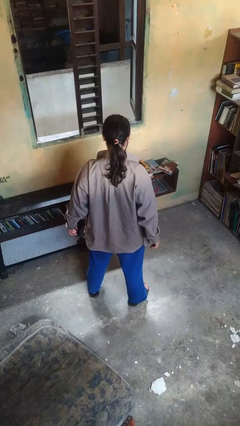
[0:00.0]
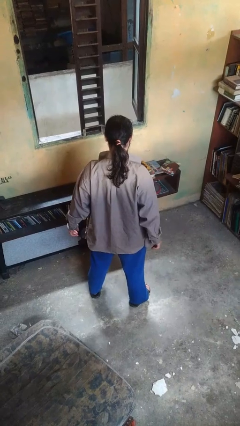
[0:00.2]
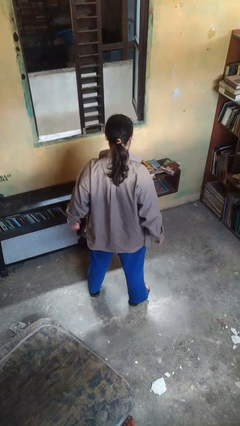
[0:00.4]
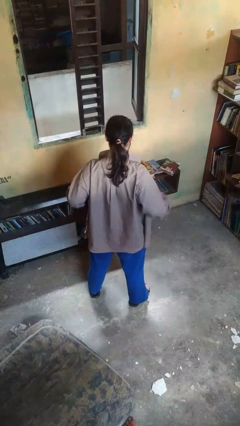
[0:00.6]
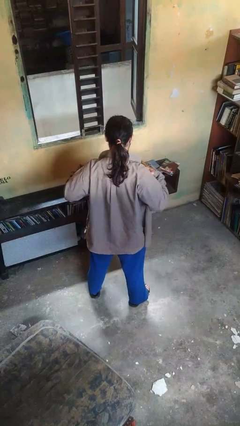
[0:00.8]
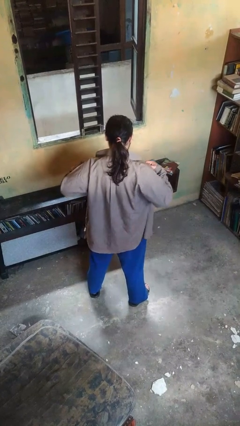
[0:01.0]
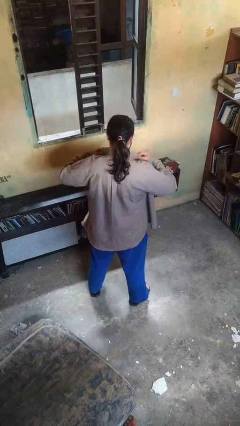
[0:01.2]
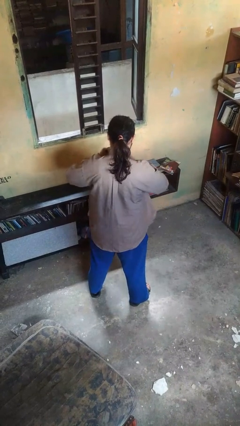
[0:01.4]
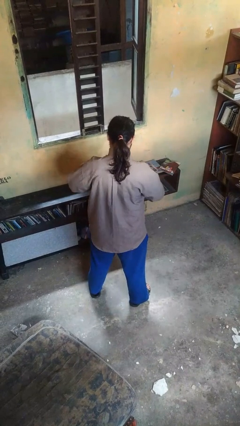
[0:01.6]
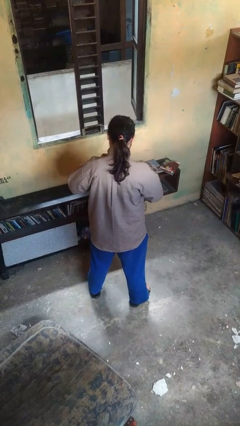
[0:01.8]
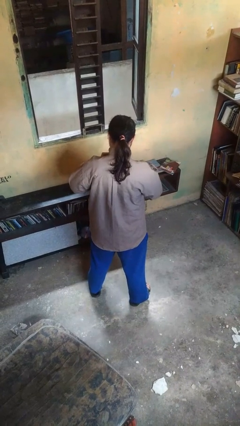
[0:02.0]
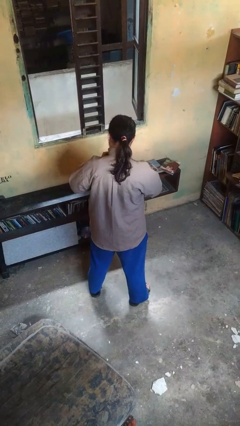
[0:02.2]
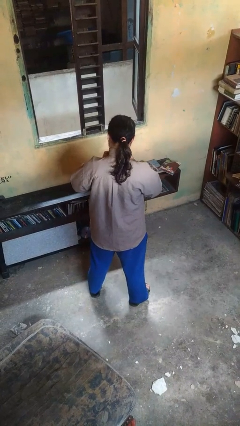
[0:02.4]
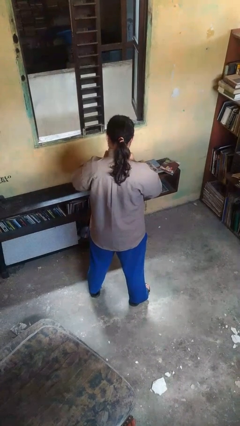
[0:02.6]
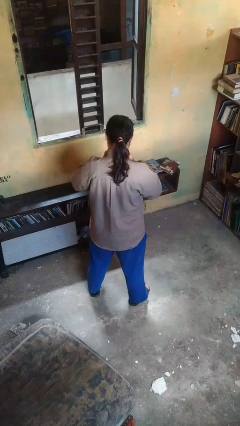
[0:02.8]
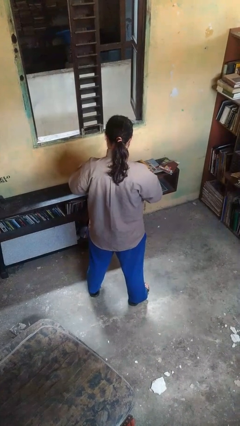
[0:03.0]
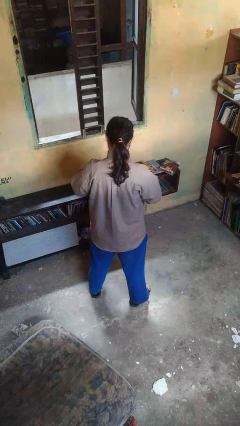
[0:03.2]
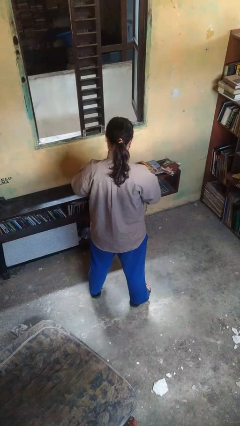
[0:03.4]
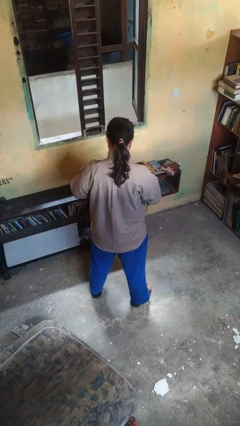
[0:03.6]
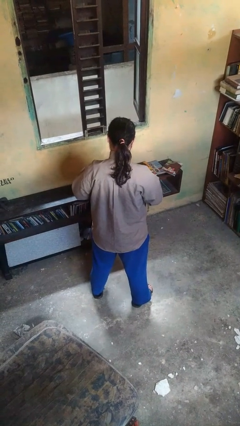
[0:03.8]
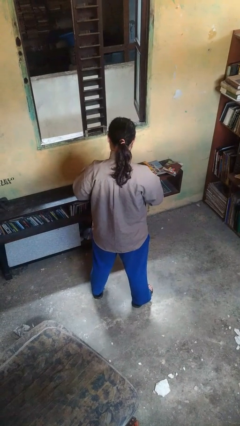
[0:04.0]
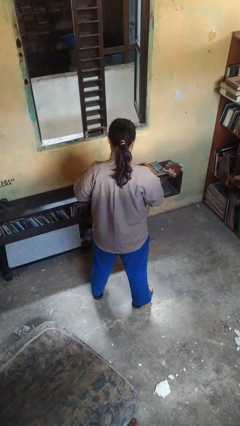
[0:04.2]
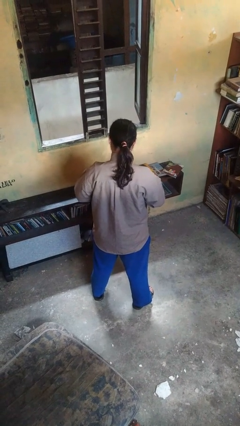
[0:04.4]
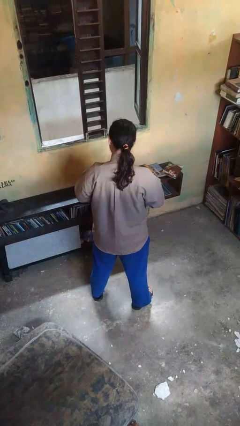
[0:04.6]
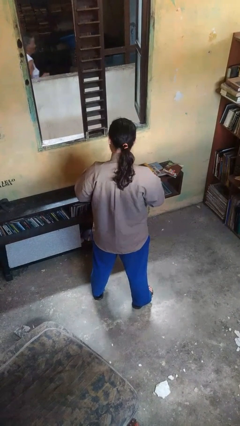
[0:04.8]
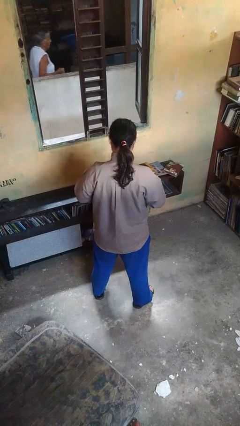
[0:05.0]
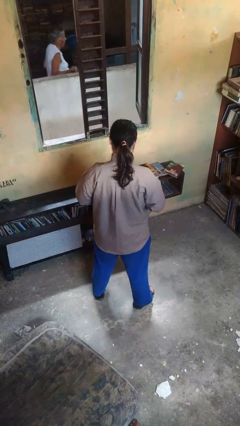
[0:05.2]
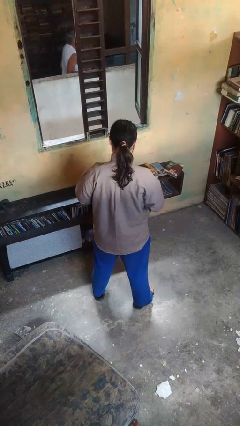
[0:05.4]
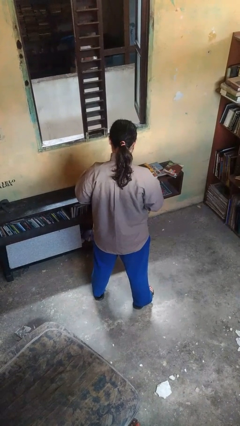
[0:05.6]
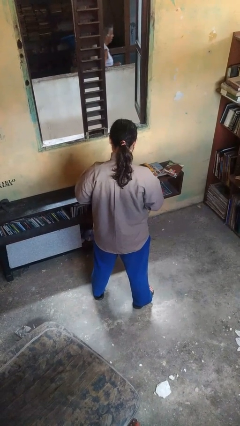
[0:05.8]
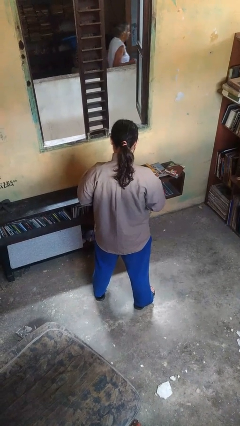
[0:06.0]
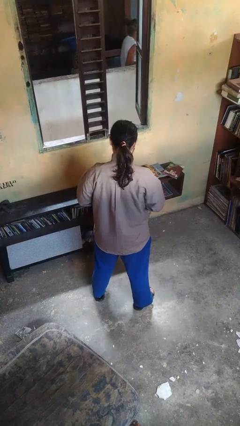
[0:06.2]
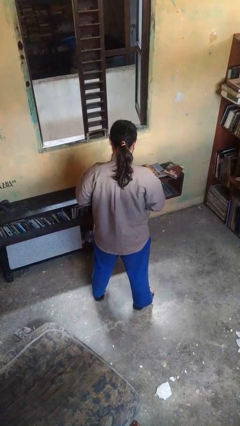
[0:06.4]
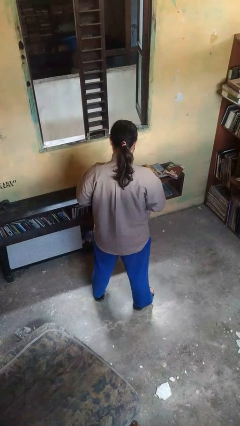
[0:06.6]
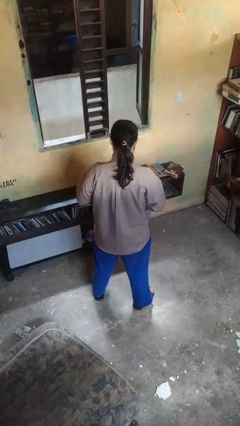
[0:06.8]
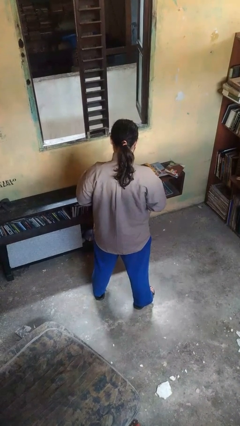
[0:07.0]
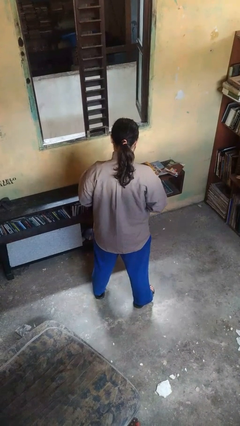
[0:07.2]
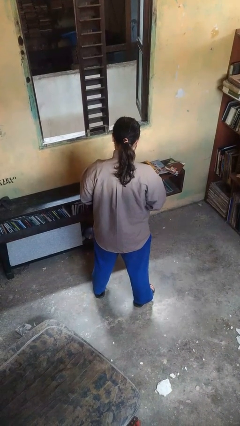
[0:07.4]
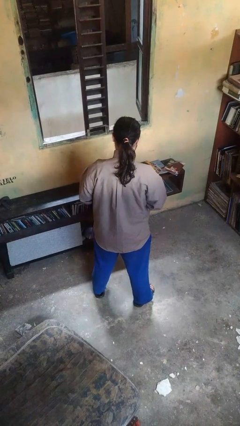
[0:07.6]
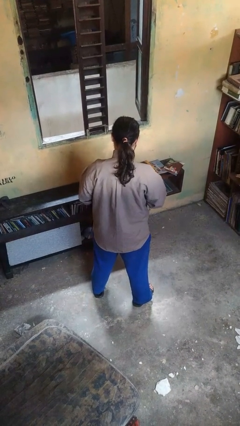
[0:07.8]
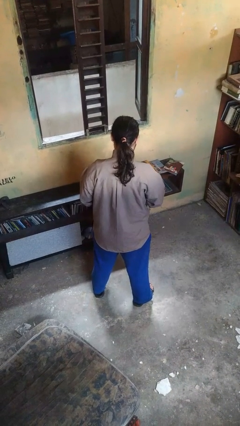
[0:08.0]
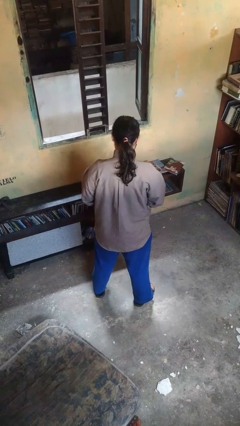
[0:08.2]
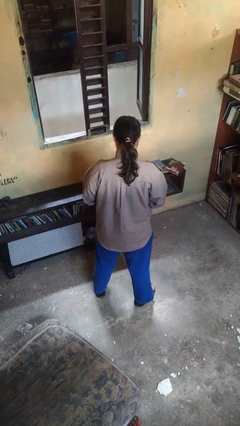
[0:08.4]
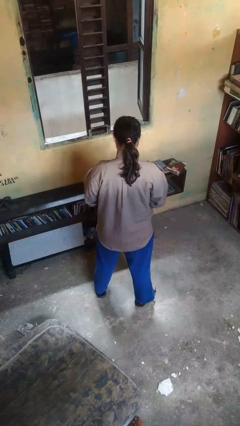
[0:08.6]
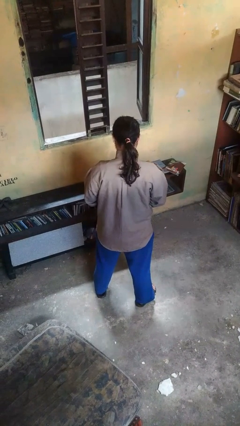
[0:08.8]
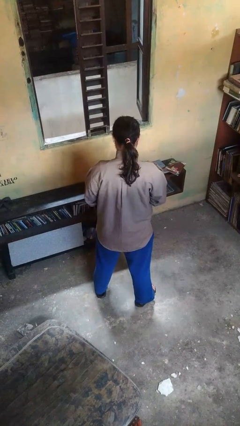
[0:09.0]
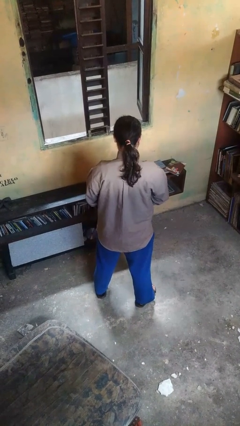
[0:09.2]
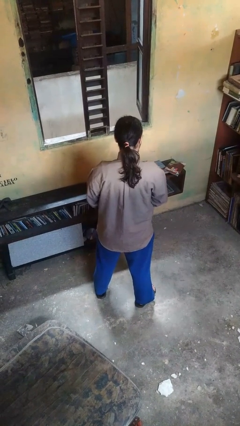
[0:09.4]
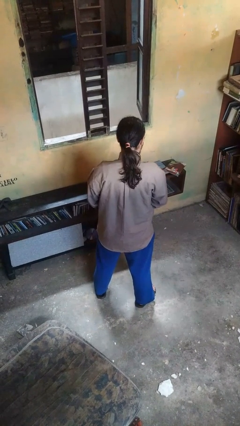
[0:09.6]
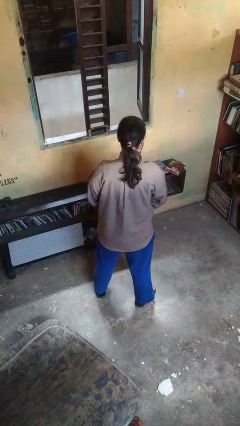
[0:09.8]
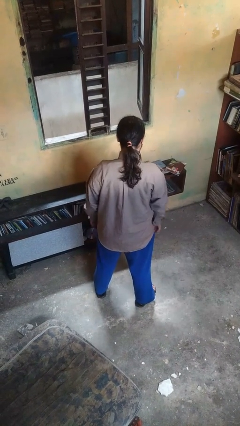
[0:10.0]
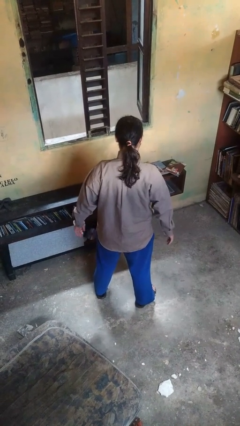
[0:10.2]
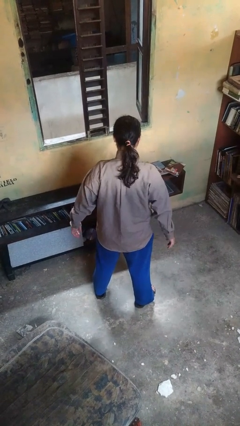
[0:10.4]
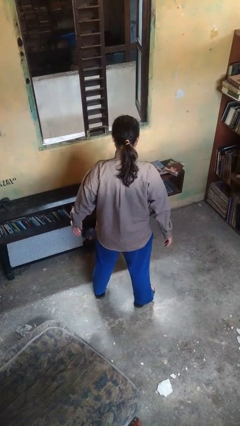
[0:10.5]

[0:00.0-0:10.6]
person buttons shirt

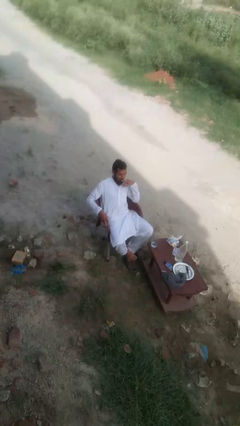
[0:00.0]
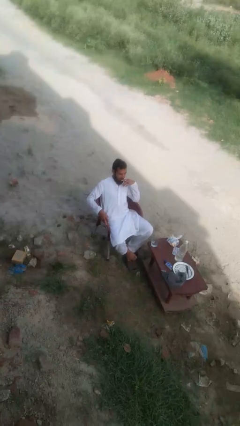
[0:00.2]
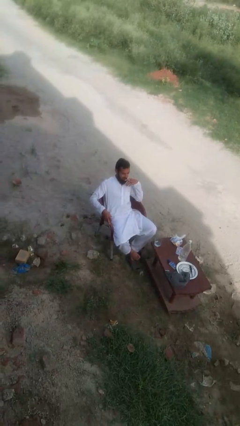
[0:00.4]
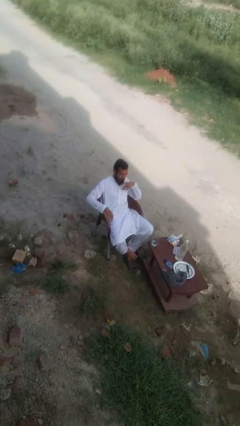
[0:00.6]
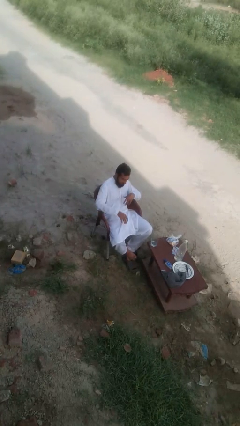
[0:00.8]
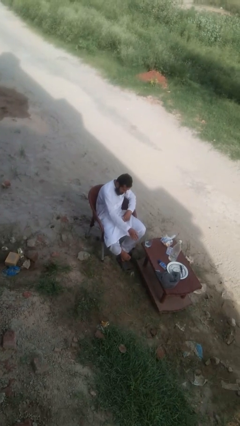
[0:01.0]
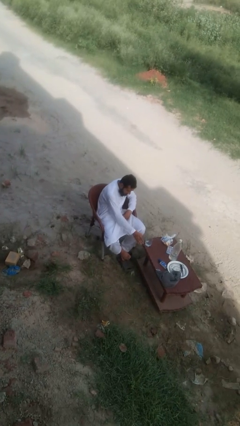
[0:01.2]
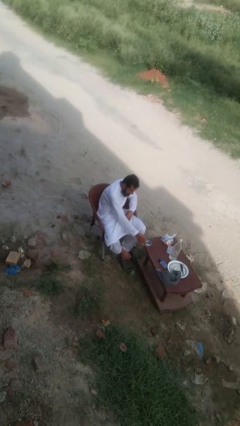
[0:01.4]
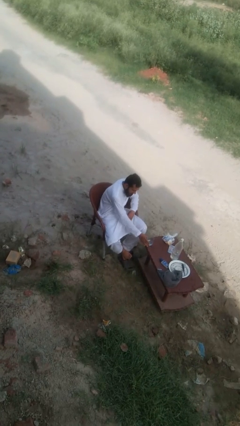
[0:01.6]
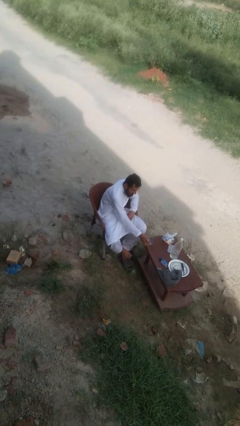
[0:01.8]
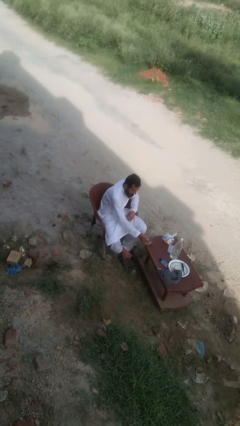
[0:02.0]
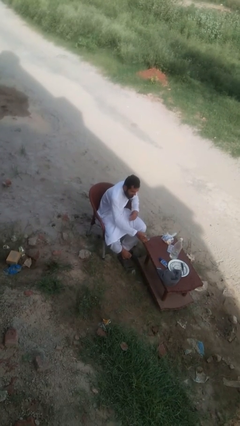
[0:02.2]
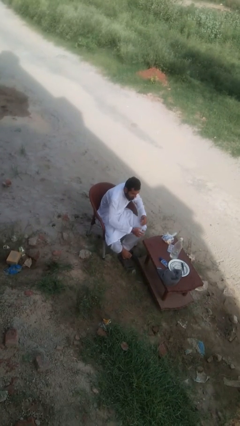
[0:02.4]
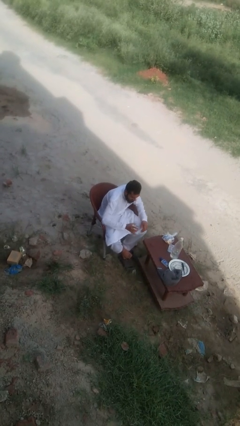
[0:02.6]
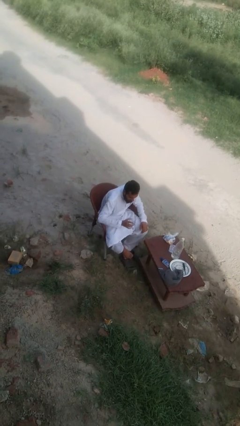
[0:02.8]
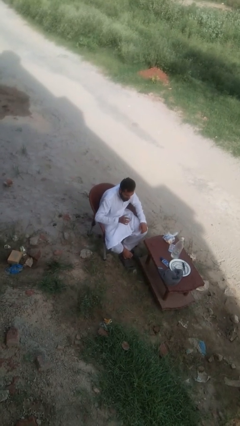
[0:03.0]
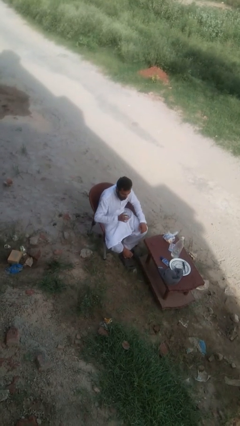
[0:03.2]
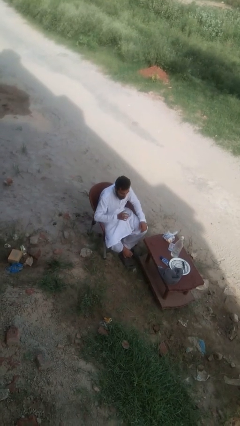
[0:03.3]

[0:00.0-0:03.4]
person picks up object from table

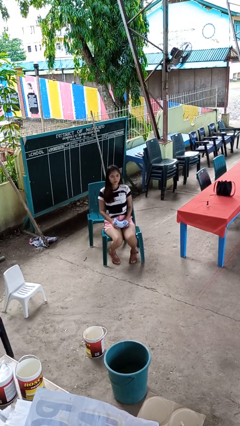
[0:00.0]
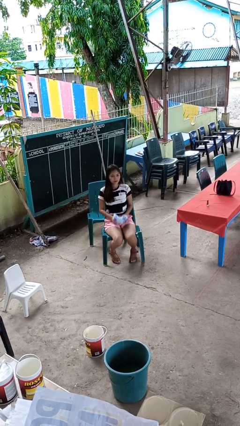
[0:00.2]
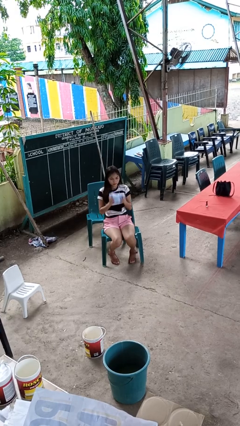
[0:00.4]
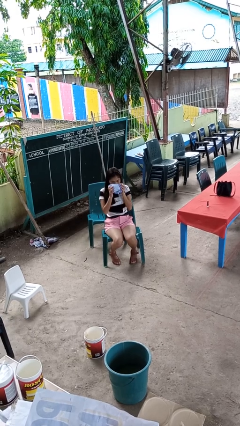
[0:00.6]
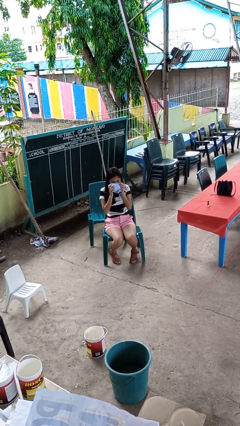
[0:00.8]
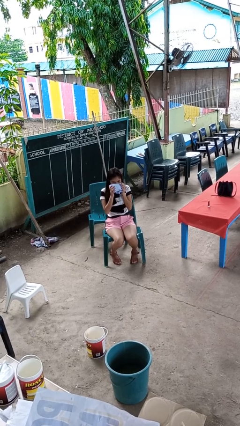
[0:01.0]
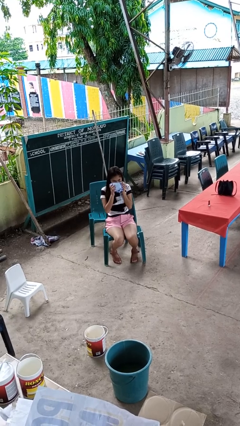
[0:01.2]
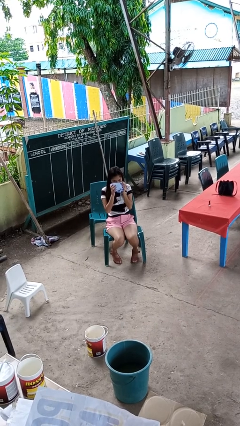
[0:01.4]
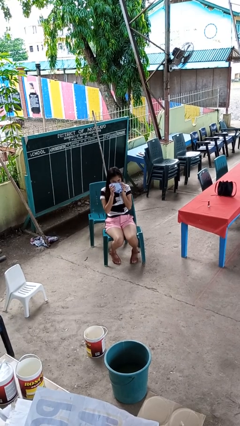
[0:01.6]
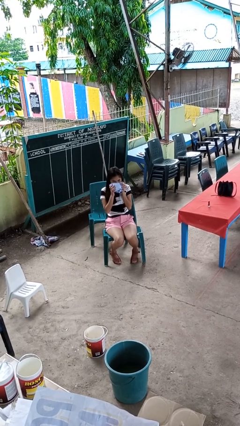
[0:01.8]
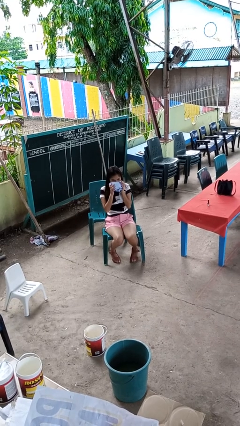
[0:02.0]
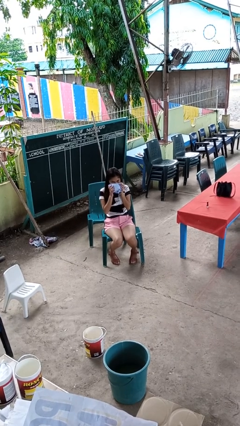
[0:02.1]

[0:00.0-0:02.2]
person blows nose

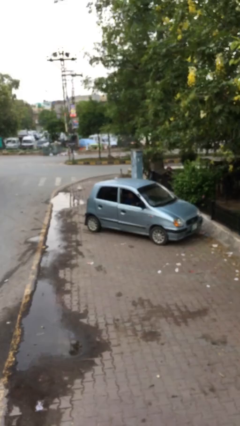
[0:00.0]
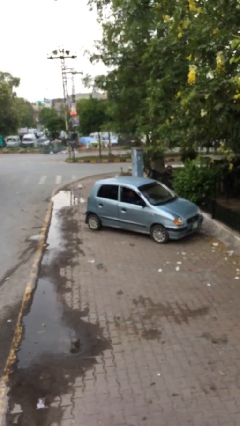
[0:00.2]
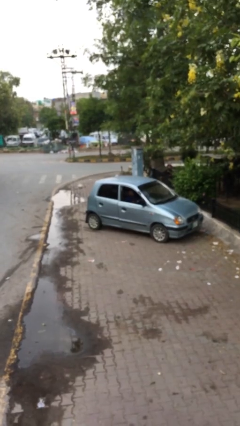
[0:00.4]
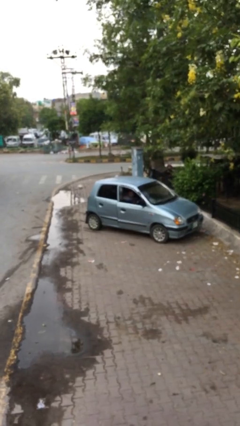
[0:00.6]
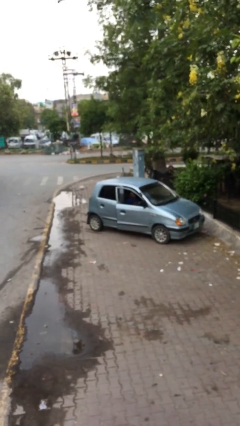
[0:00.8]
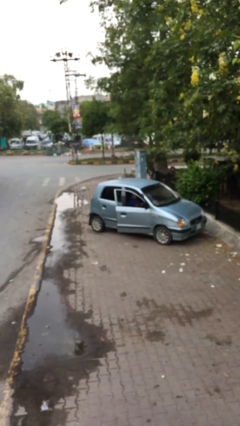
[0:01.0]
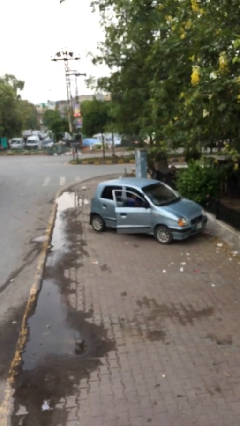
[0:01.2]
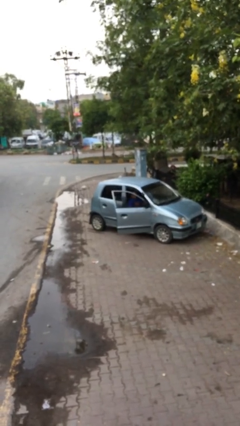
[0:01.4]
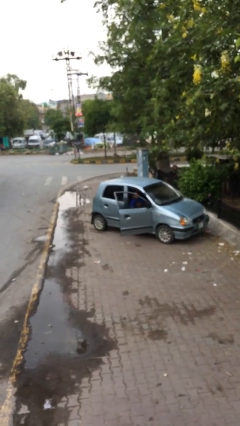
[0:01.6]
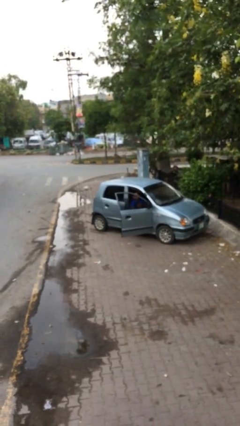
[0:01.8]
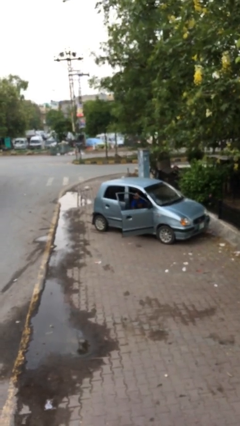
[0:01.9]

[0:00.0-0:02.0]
person opens car door
